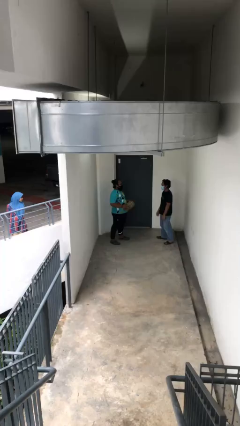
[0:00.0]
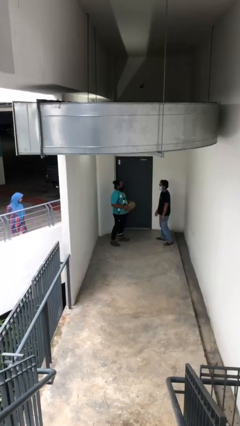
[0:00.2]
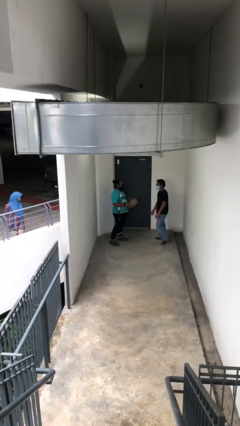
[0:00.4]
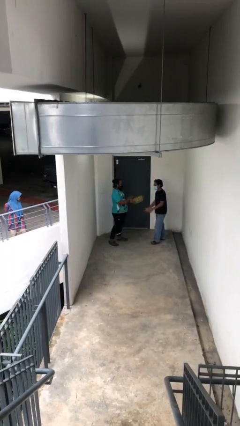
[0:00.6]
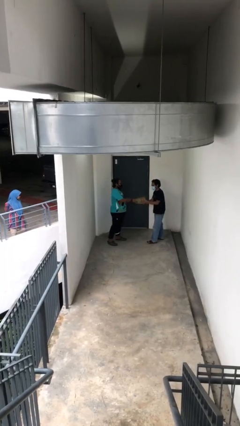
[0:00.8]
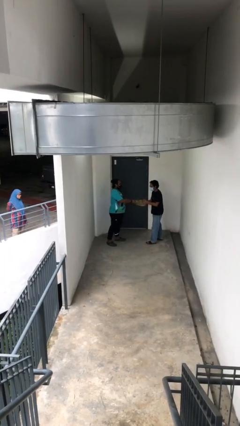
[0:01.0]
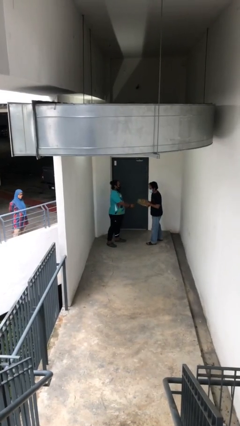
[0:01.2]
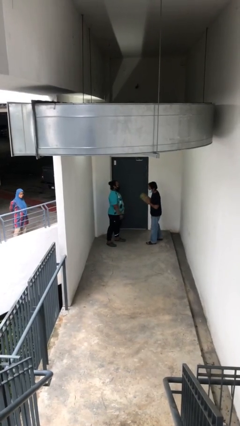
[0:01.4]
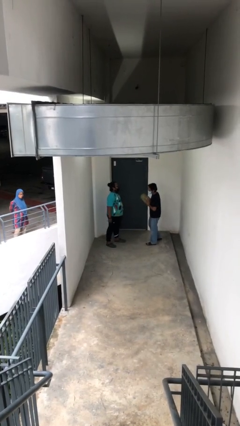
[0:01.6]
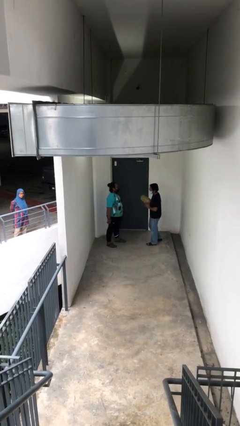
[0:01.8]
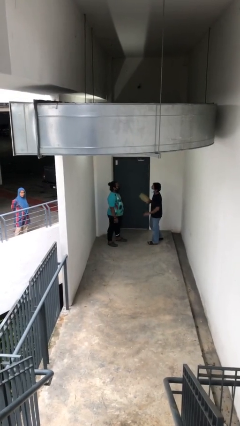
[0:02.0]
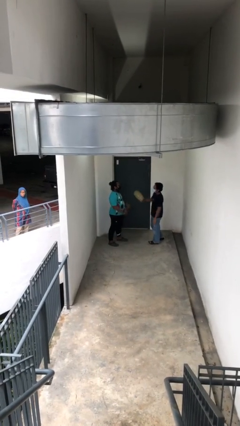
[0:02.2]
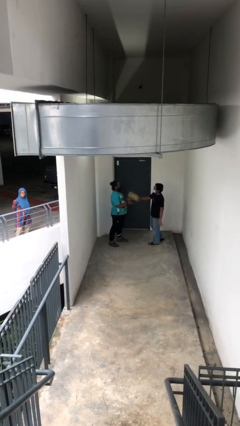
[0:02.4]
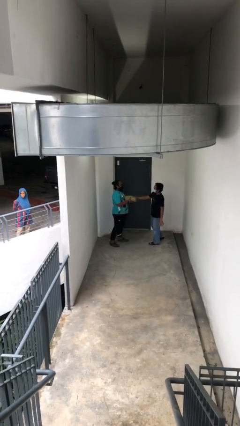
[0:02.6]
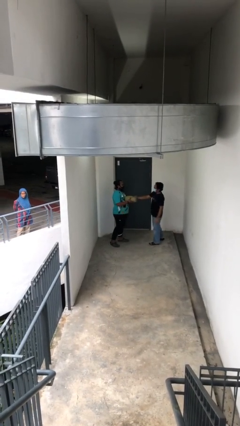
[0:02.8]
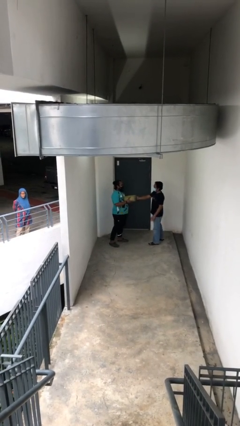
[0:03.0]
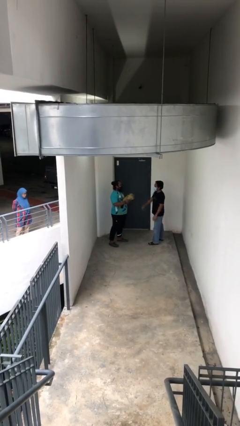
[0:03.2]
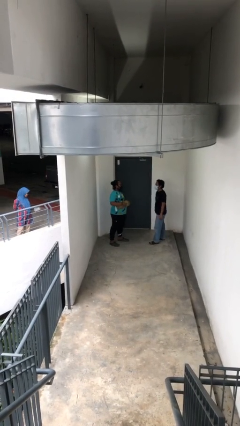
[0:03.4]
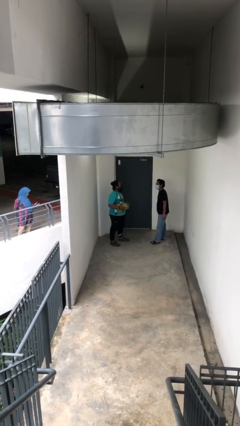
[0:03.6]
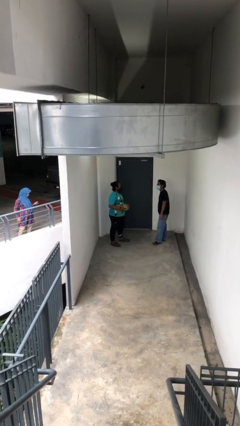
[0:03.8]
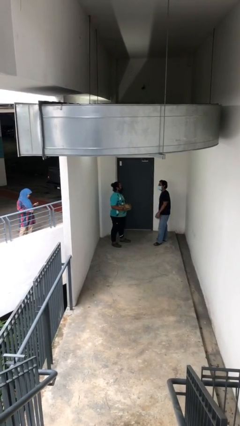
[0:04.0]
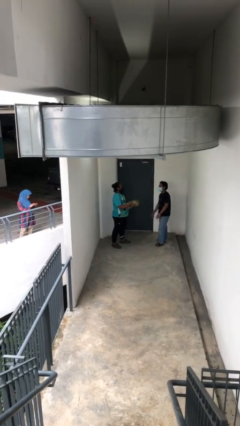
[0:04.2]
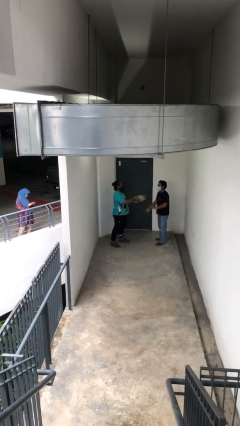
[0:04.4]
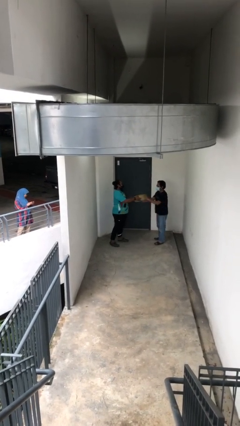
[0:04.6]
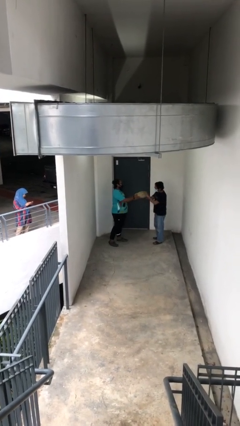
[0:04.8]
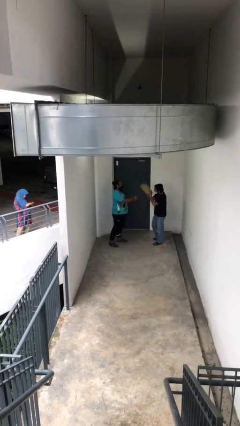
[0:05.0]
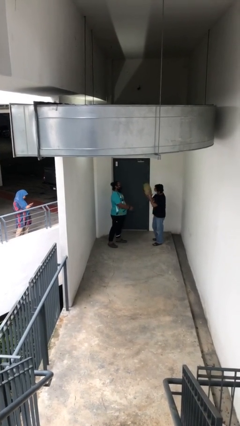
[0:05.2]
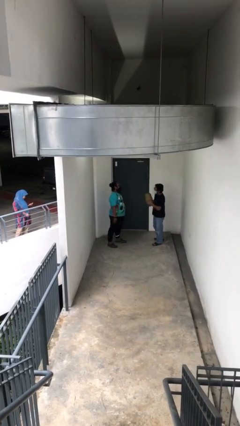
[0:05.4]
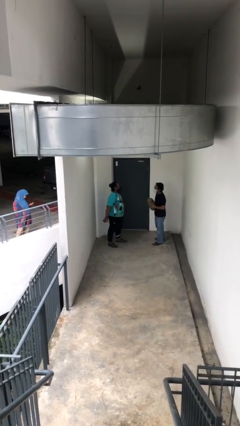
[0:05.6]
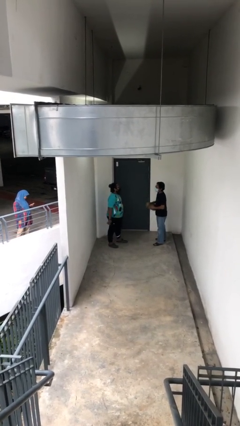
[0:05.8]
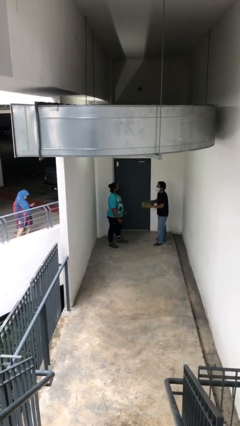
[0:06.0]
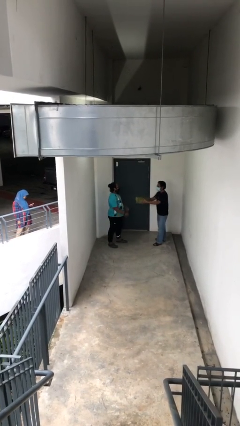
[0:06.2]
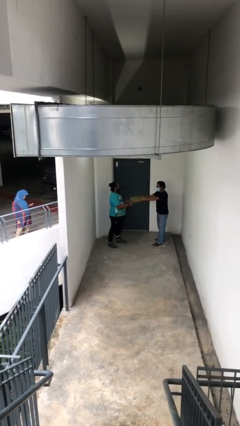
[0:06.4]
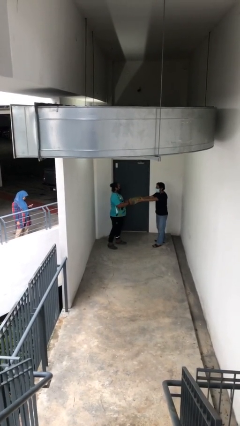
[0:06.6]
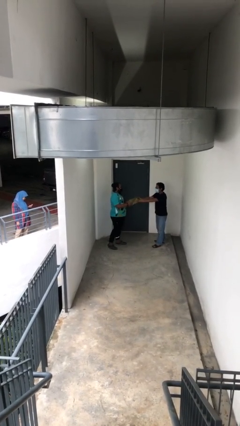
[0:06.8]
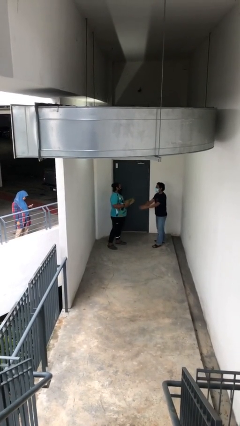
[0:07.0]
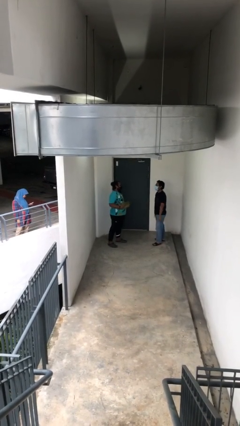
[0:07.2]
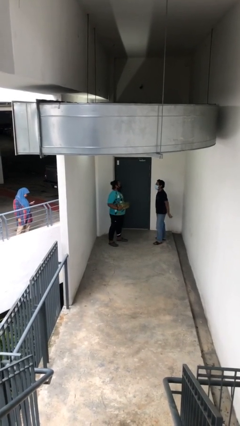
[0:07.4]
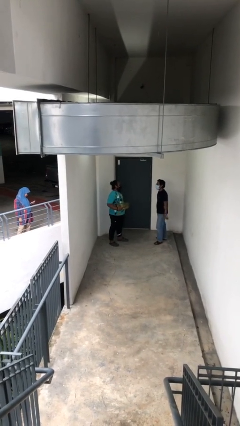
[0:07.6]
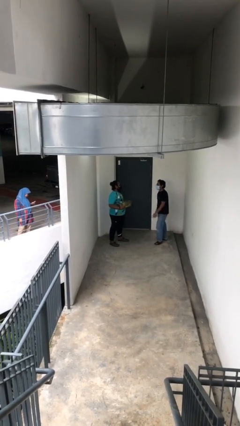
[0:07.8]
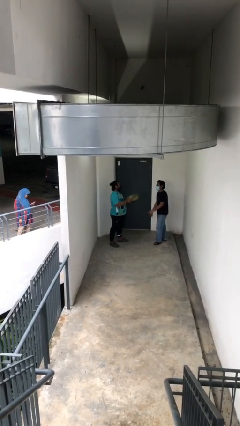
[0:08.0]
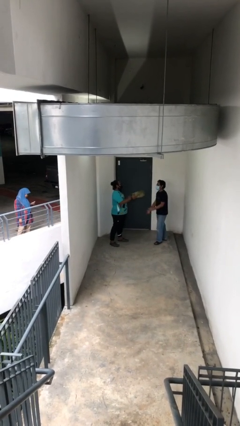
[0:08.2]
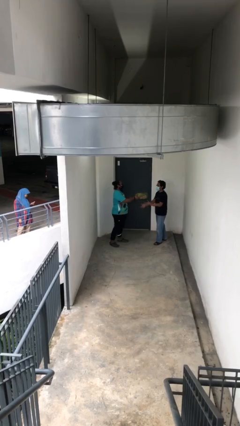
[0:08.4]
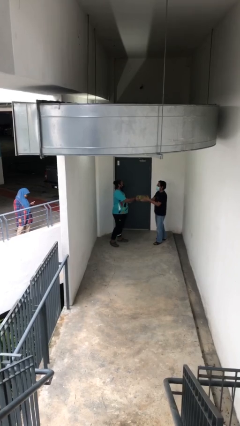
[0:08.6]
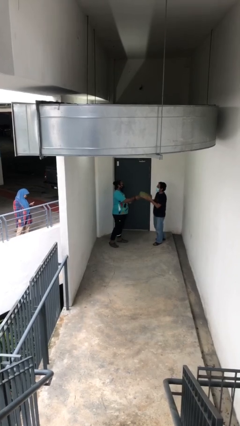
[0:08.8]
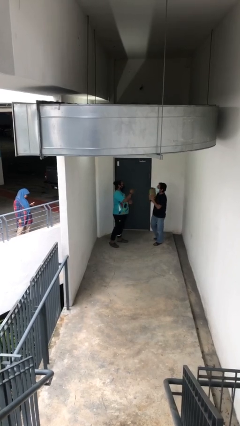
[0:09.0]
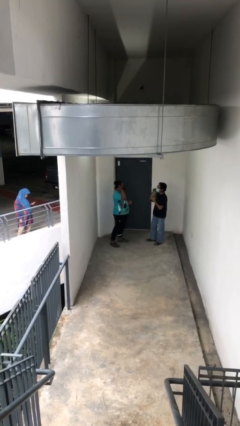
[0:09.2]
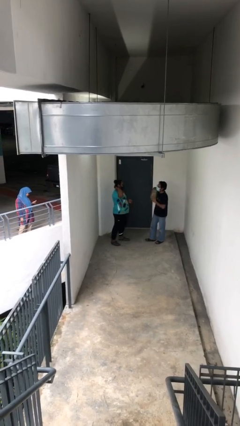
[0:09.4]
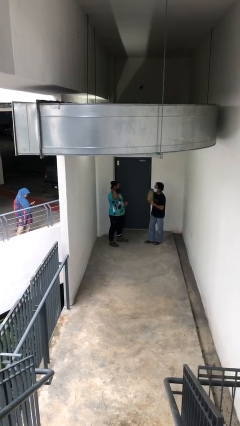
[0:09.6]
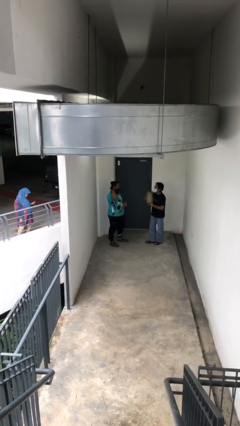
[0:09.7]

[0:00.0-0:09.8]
person transfers object to person

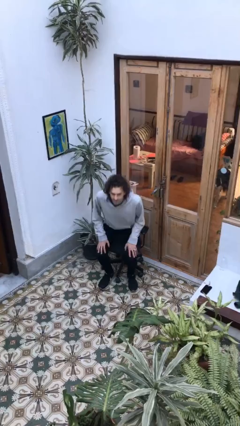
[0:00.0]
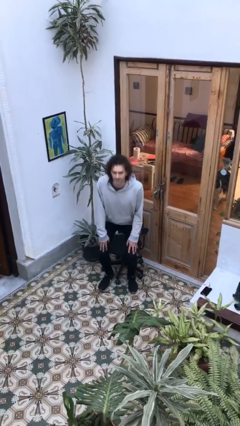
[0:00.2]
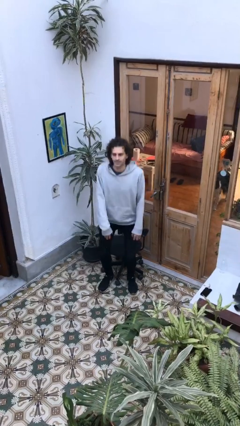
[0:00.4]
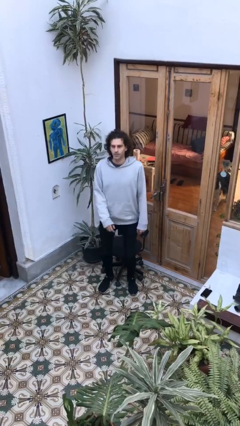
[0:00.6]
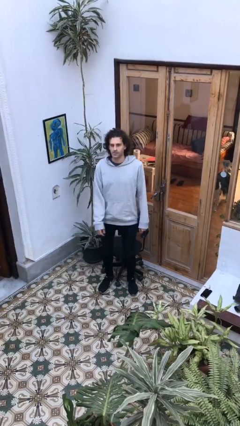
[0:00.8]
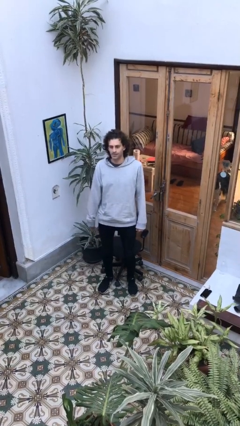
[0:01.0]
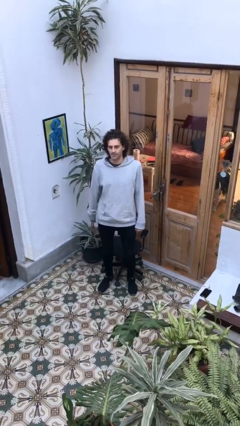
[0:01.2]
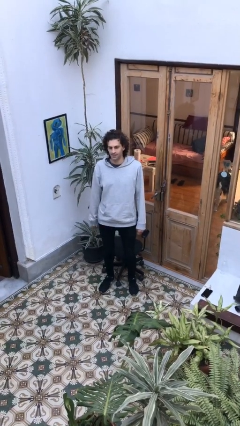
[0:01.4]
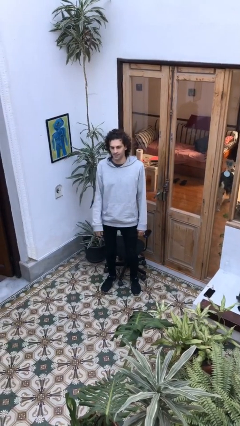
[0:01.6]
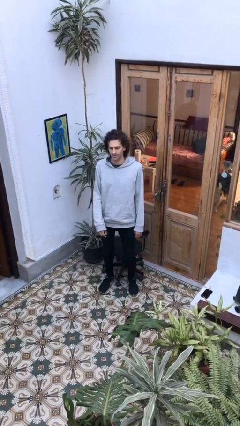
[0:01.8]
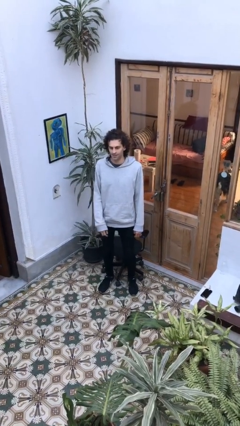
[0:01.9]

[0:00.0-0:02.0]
person stands up

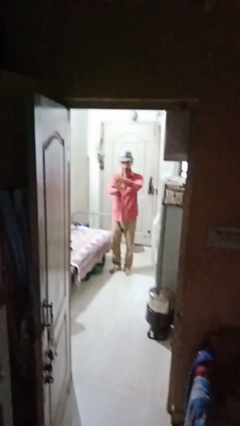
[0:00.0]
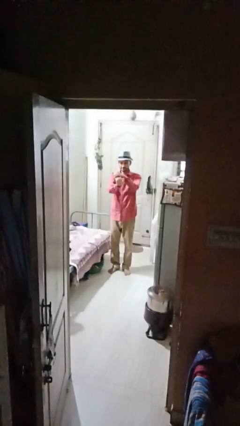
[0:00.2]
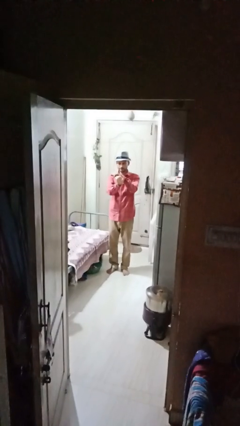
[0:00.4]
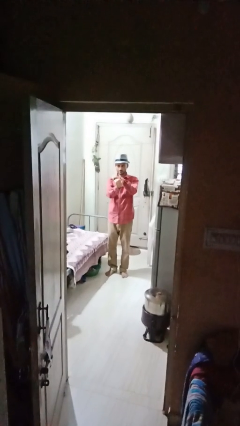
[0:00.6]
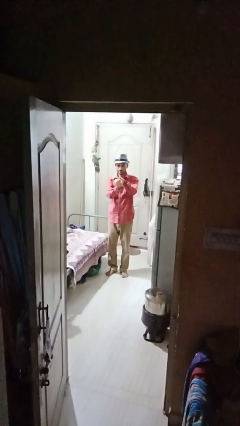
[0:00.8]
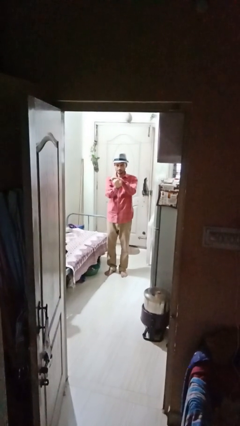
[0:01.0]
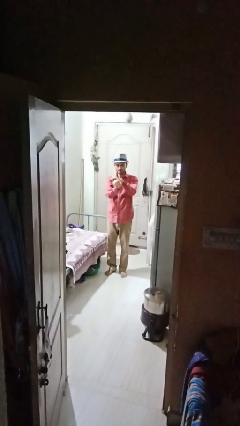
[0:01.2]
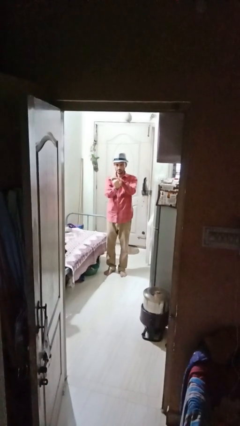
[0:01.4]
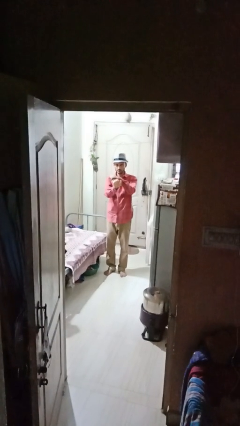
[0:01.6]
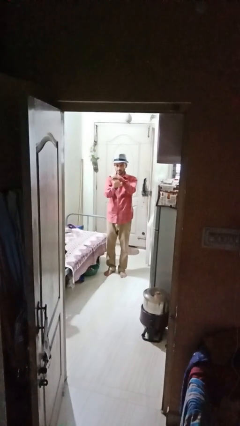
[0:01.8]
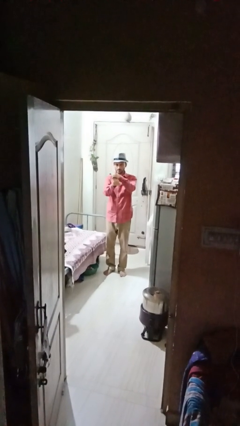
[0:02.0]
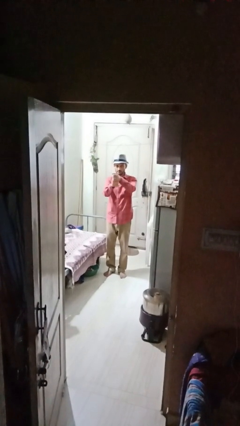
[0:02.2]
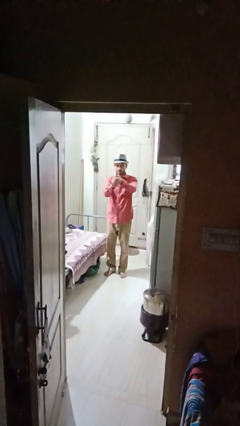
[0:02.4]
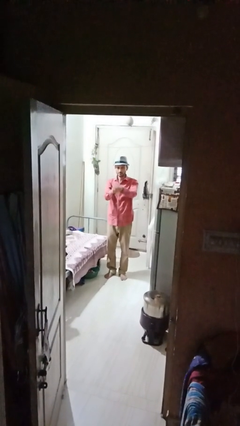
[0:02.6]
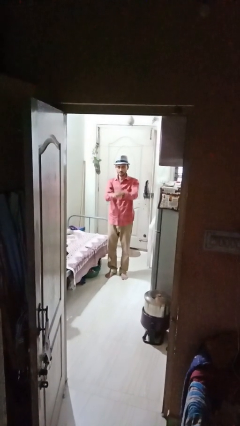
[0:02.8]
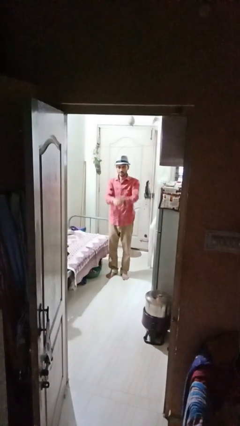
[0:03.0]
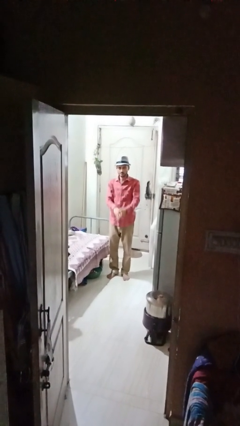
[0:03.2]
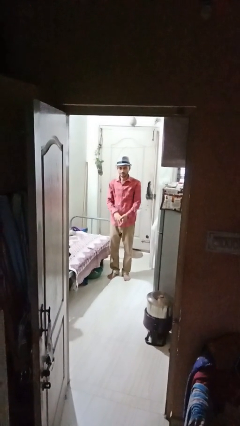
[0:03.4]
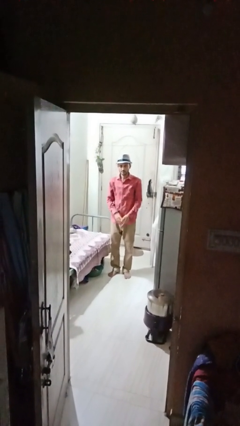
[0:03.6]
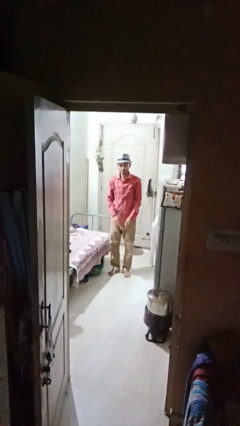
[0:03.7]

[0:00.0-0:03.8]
person cracks knuckles

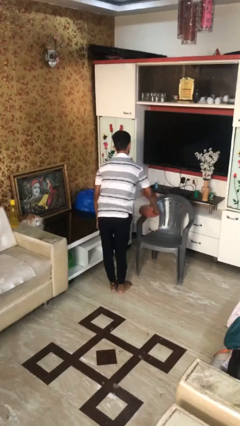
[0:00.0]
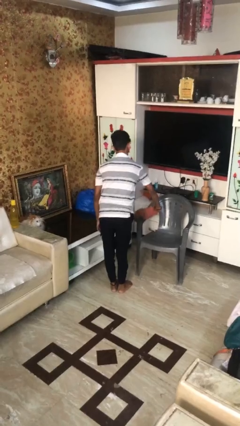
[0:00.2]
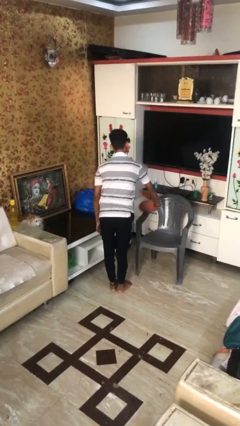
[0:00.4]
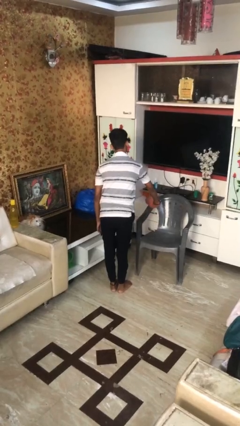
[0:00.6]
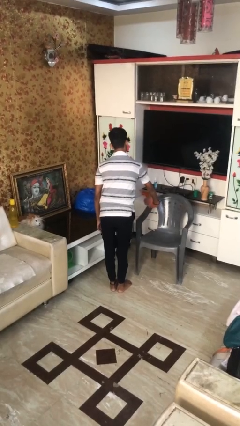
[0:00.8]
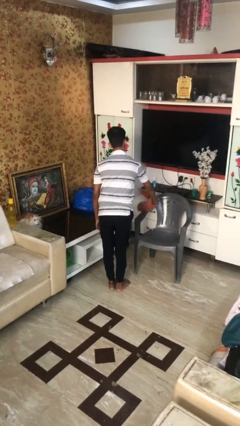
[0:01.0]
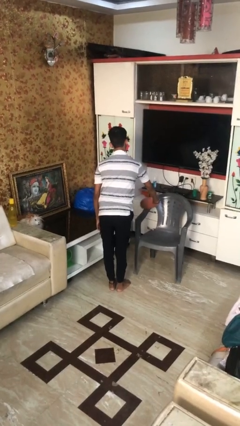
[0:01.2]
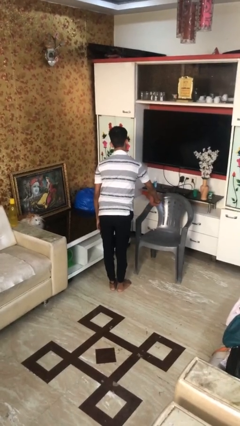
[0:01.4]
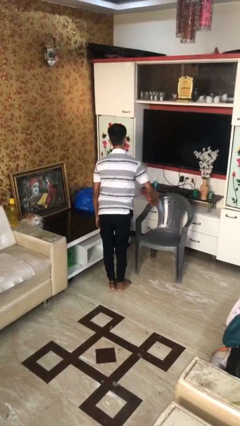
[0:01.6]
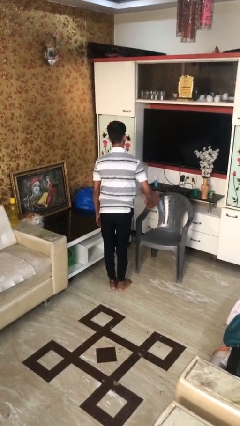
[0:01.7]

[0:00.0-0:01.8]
person dusts furniture

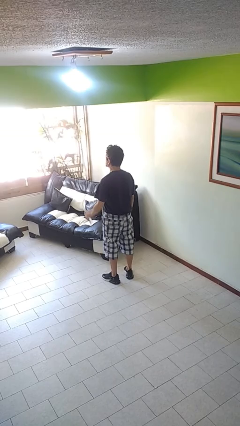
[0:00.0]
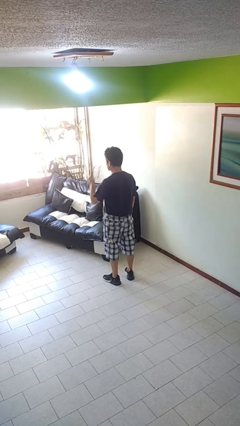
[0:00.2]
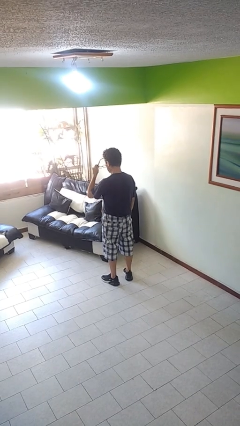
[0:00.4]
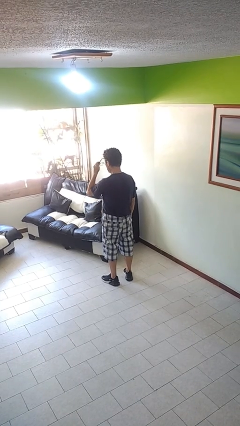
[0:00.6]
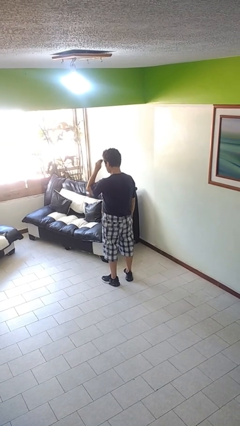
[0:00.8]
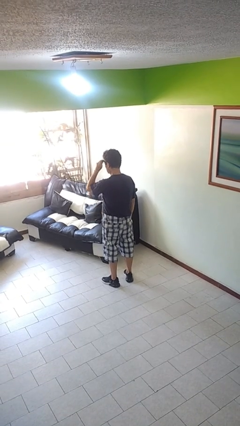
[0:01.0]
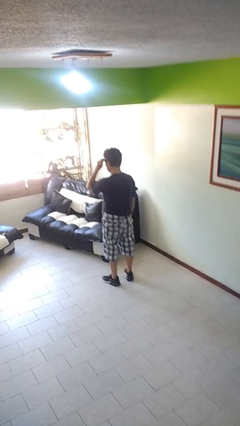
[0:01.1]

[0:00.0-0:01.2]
person puts on glasses
